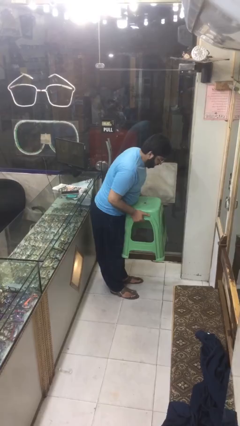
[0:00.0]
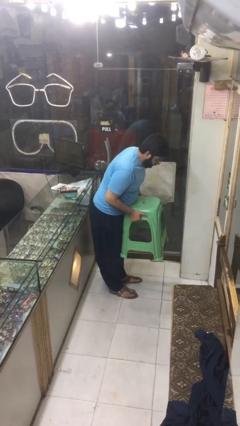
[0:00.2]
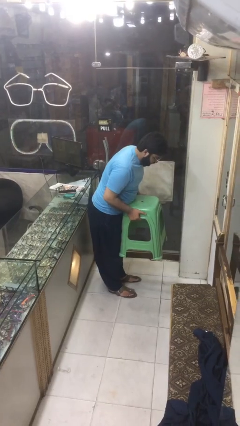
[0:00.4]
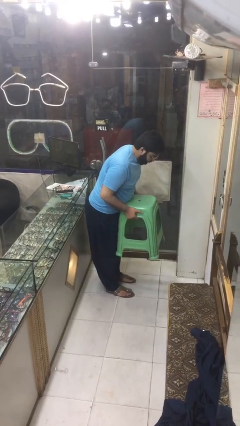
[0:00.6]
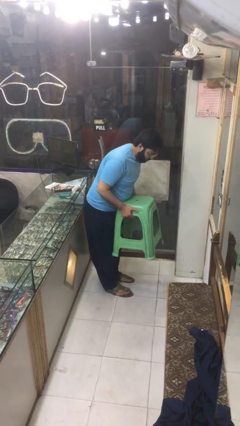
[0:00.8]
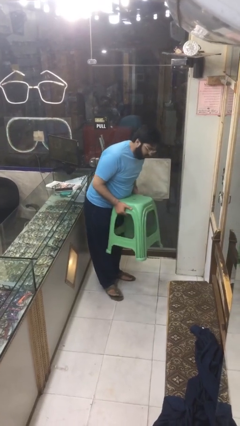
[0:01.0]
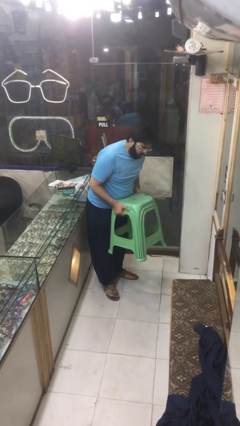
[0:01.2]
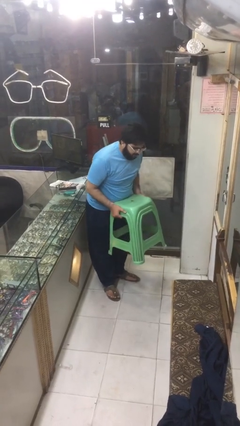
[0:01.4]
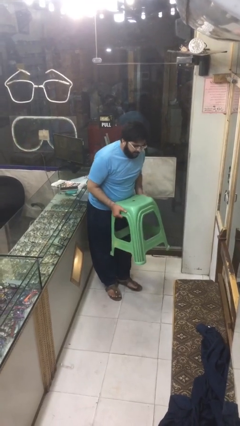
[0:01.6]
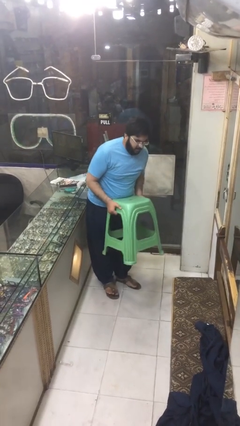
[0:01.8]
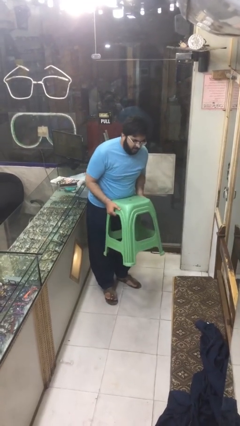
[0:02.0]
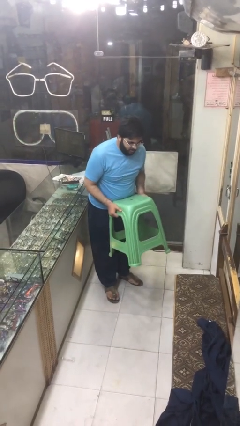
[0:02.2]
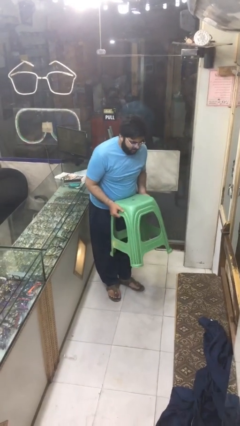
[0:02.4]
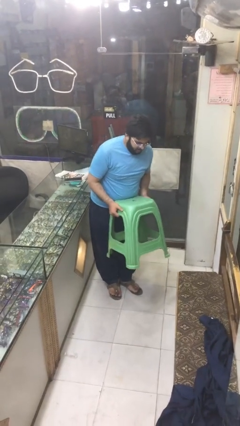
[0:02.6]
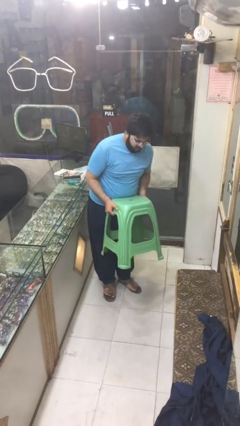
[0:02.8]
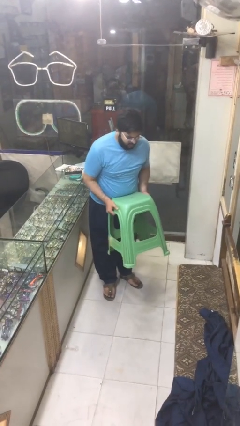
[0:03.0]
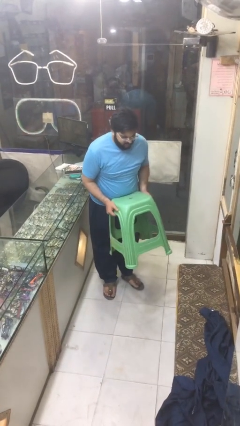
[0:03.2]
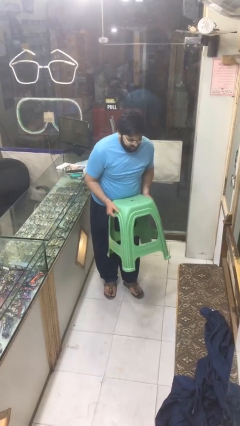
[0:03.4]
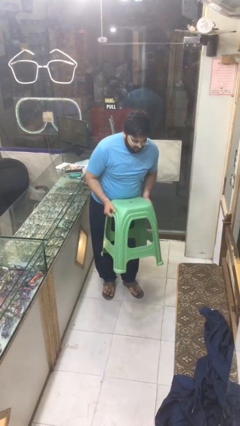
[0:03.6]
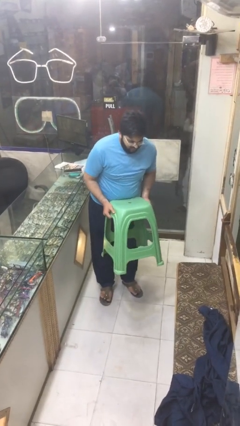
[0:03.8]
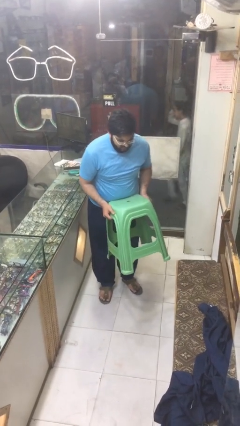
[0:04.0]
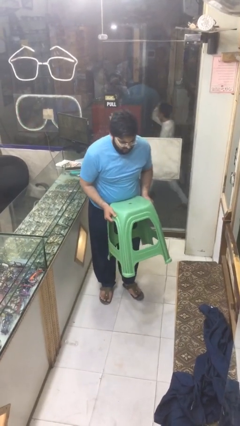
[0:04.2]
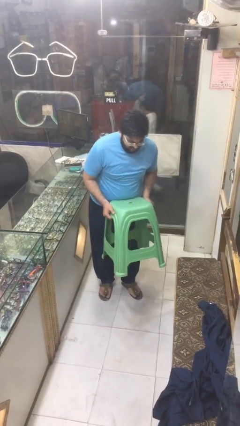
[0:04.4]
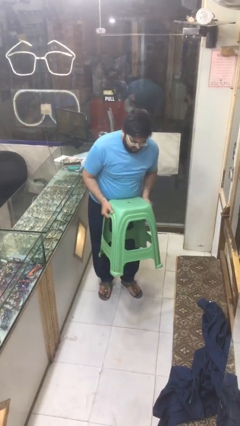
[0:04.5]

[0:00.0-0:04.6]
person carries heavy object

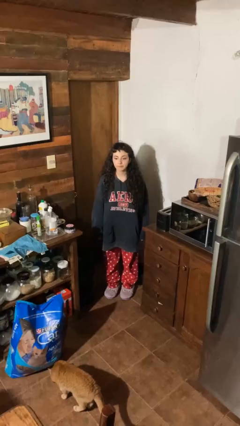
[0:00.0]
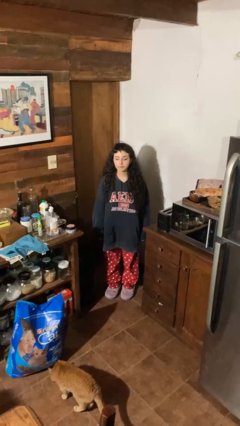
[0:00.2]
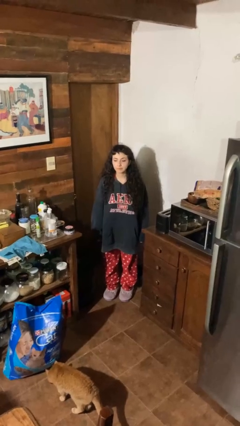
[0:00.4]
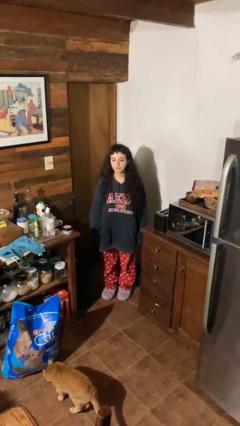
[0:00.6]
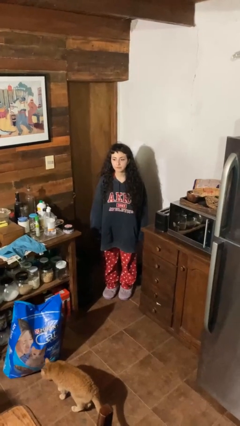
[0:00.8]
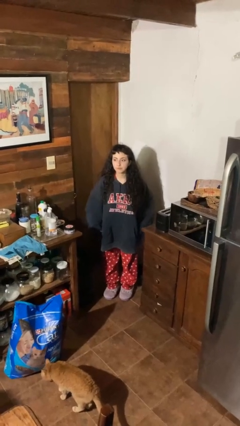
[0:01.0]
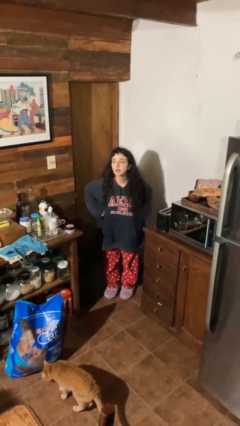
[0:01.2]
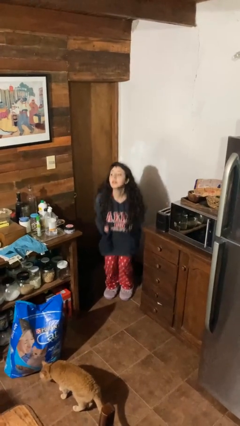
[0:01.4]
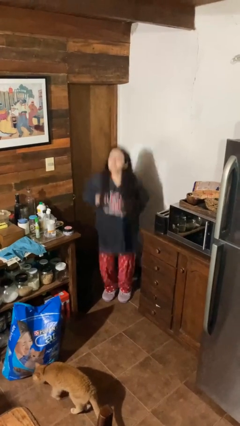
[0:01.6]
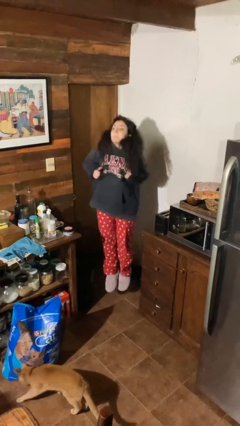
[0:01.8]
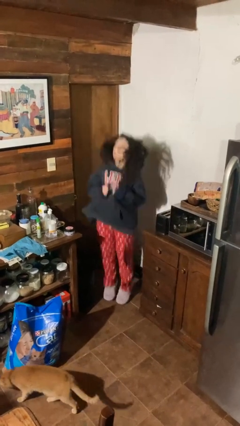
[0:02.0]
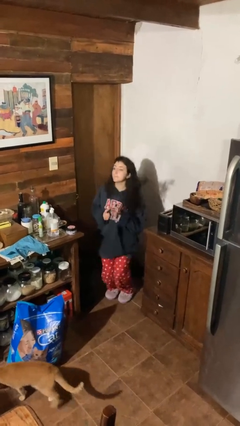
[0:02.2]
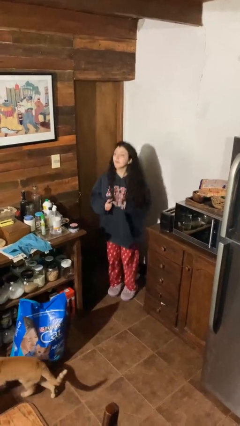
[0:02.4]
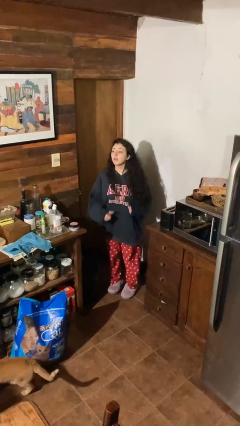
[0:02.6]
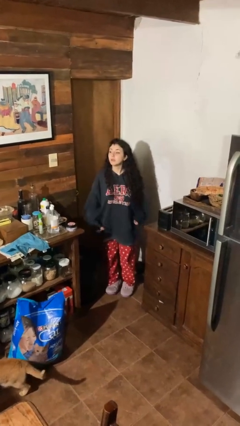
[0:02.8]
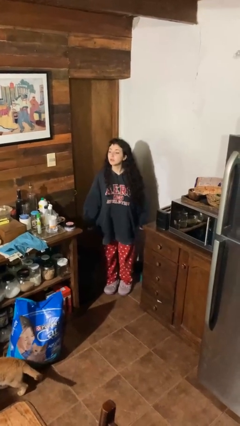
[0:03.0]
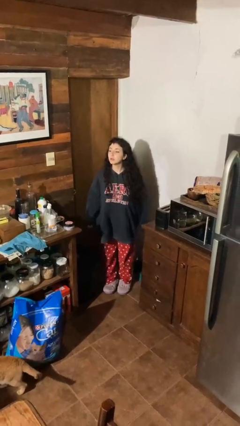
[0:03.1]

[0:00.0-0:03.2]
person jumps

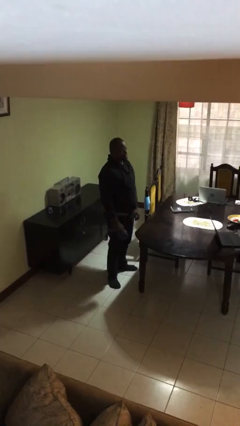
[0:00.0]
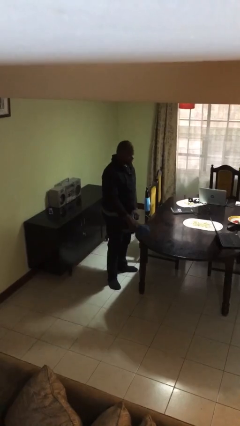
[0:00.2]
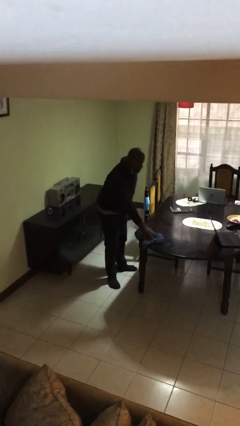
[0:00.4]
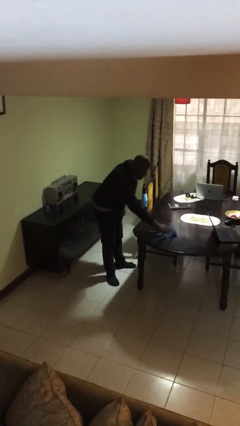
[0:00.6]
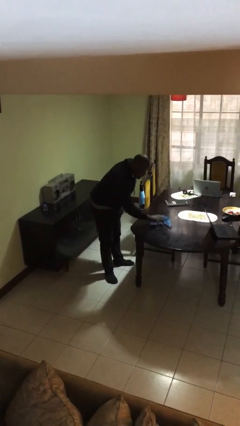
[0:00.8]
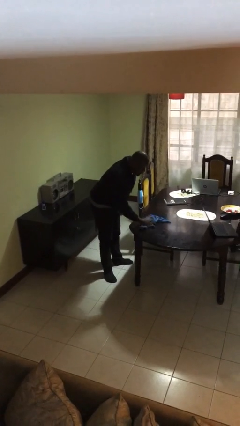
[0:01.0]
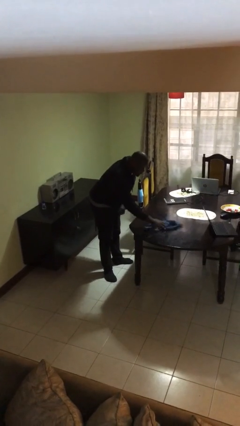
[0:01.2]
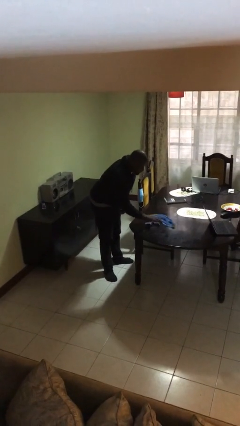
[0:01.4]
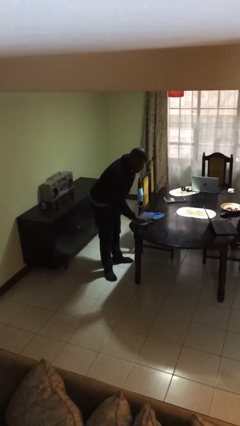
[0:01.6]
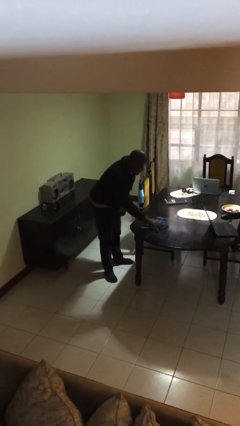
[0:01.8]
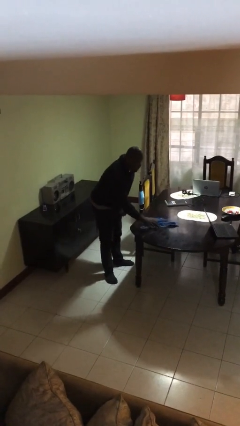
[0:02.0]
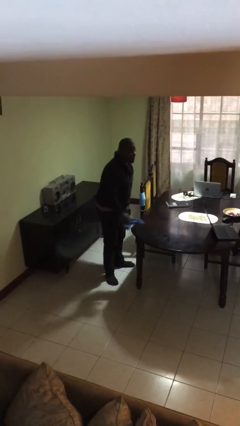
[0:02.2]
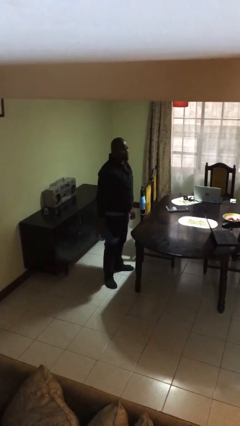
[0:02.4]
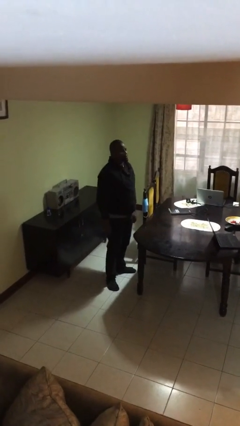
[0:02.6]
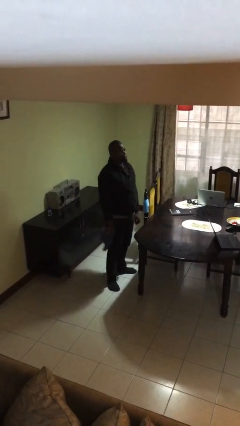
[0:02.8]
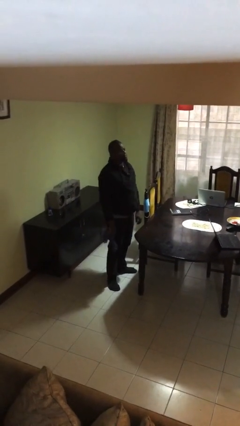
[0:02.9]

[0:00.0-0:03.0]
person cleans table with rag

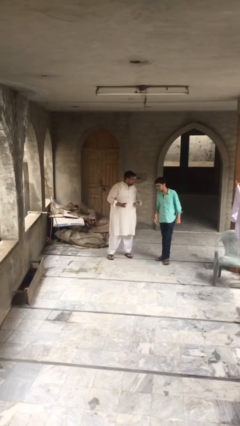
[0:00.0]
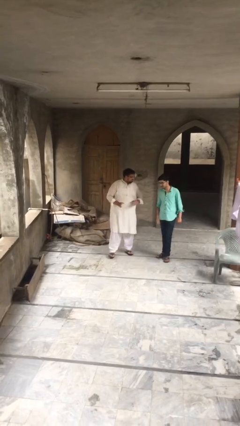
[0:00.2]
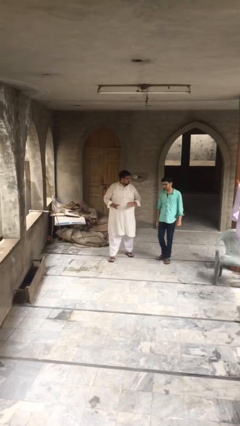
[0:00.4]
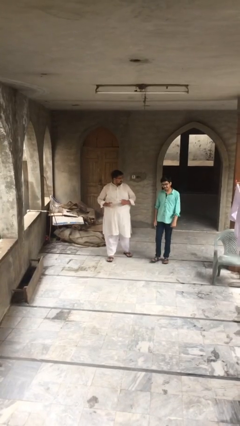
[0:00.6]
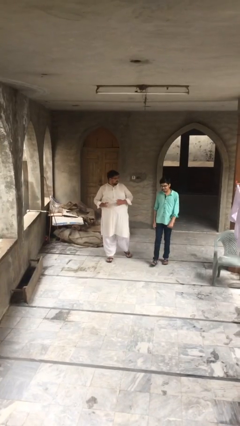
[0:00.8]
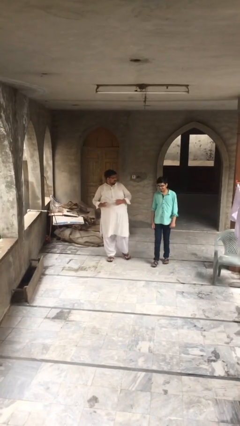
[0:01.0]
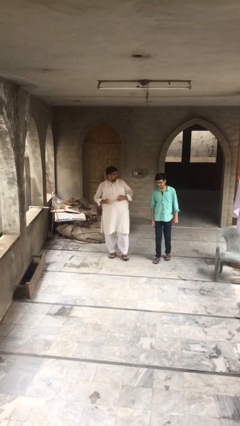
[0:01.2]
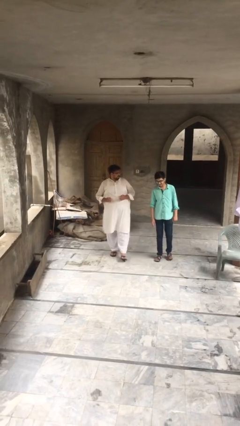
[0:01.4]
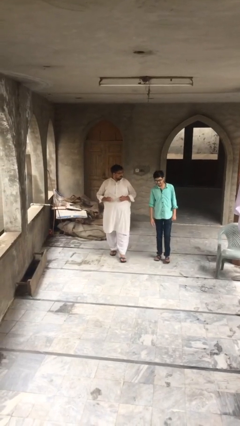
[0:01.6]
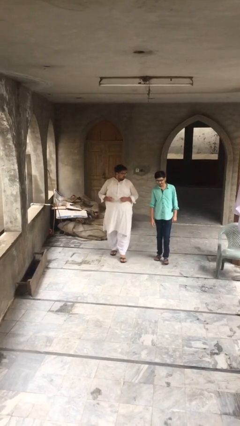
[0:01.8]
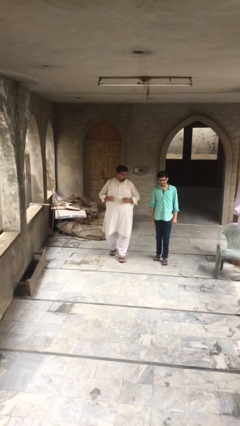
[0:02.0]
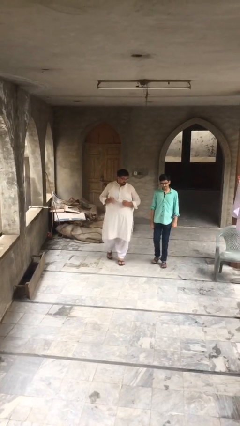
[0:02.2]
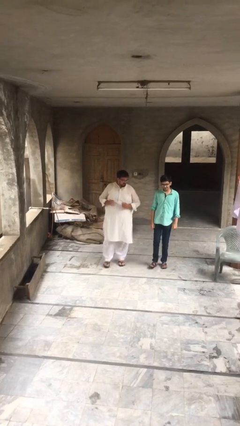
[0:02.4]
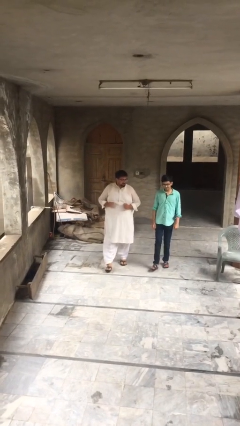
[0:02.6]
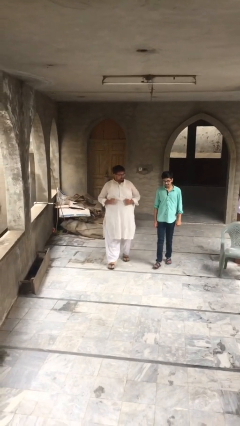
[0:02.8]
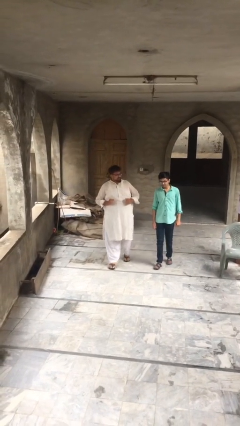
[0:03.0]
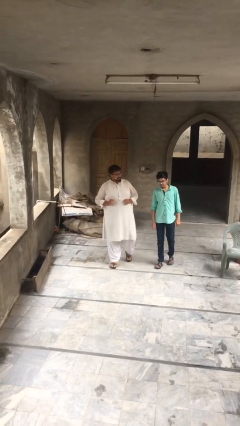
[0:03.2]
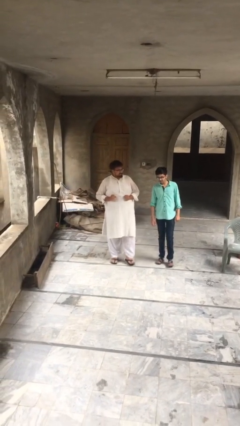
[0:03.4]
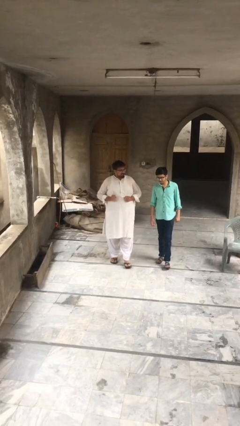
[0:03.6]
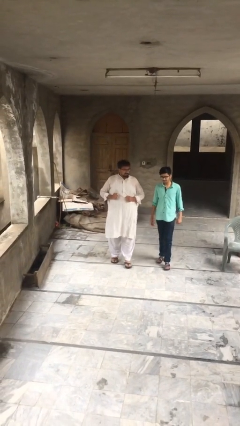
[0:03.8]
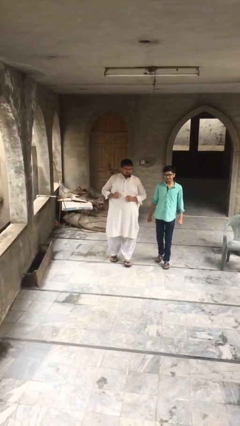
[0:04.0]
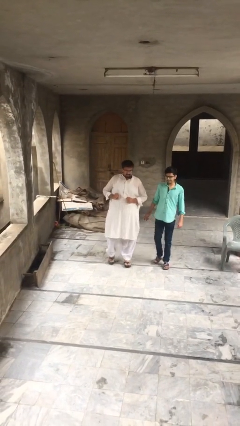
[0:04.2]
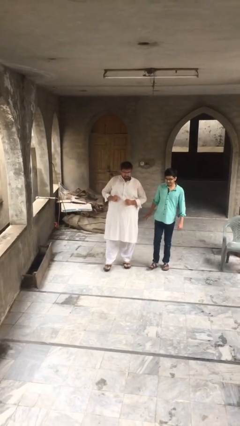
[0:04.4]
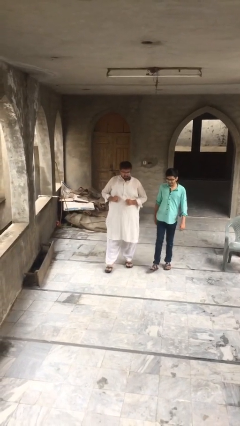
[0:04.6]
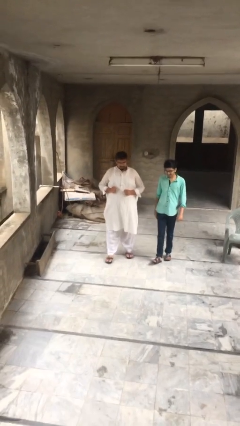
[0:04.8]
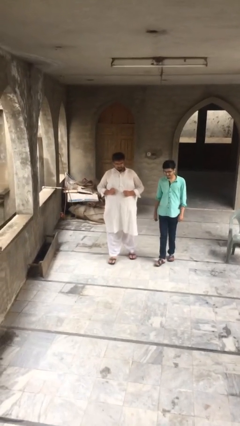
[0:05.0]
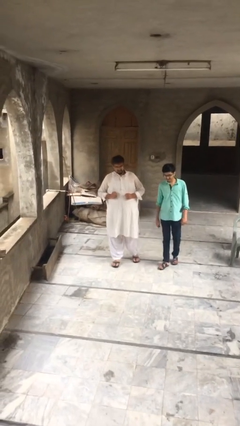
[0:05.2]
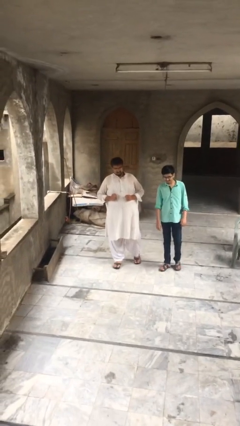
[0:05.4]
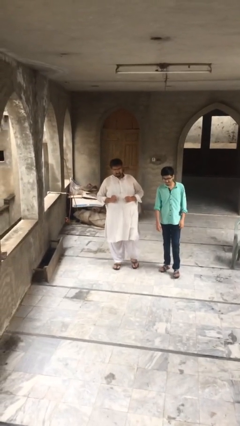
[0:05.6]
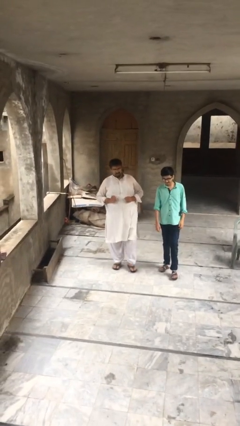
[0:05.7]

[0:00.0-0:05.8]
person talks to person

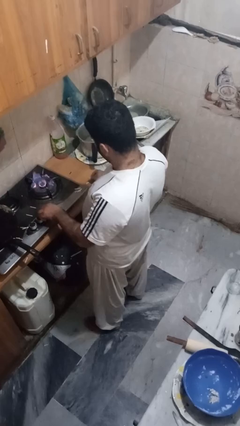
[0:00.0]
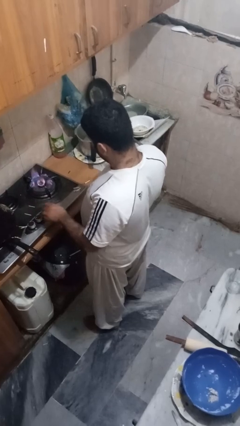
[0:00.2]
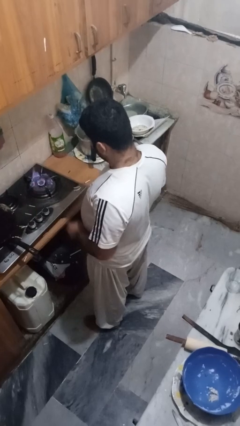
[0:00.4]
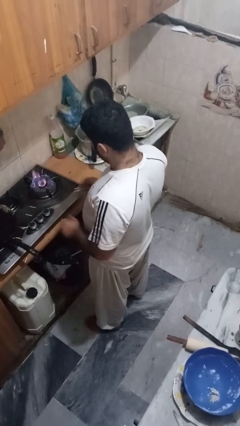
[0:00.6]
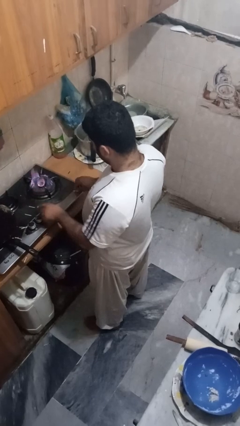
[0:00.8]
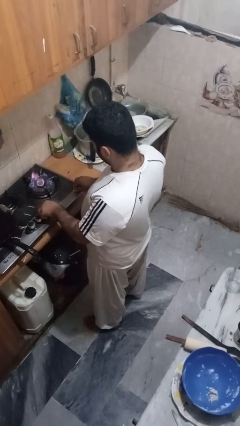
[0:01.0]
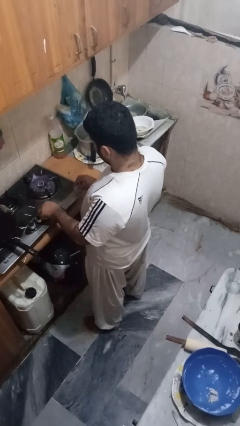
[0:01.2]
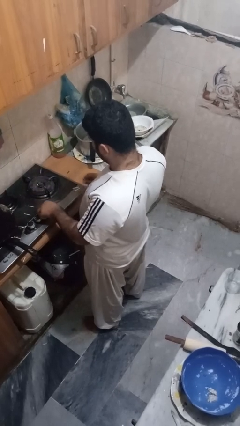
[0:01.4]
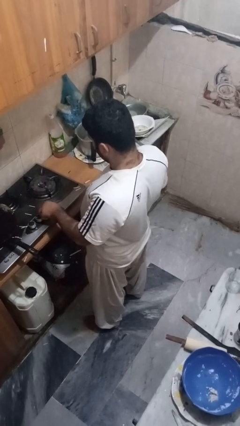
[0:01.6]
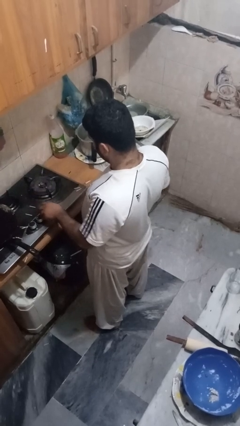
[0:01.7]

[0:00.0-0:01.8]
person turns off stovetop
